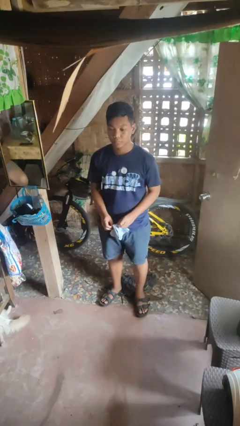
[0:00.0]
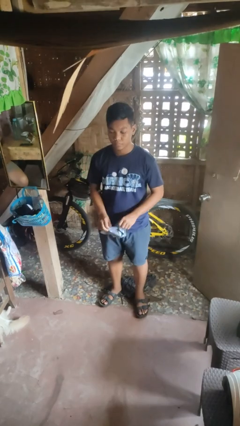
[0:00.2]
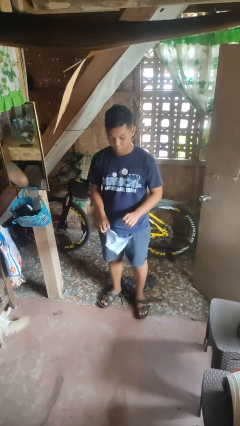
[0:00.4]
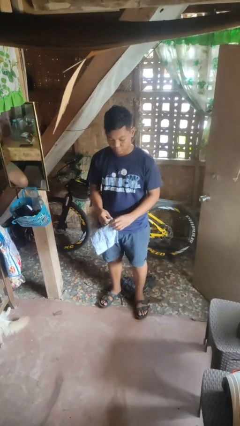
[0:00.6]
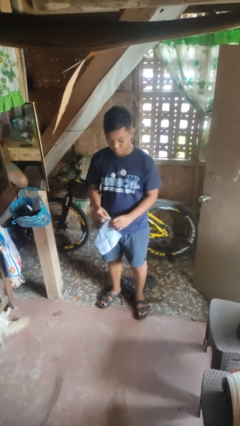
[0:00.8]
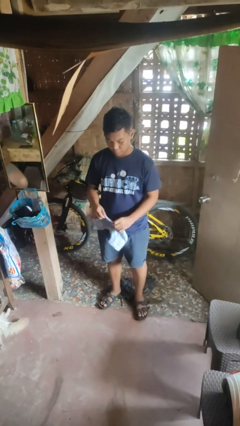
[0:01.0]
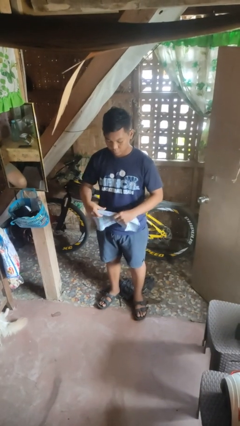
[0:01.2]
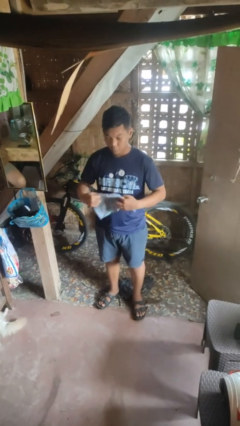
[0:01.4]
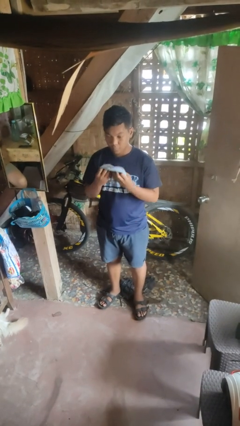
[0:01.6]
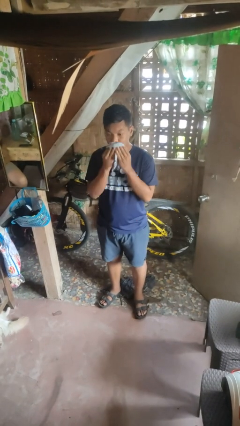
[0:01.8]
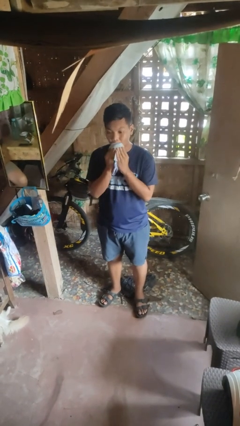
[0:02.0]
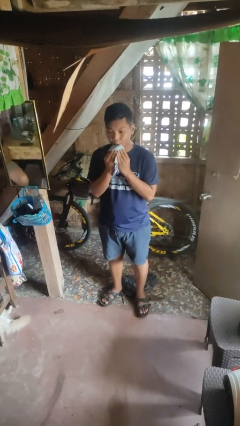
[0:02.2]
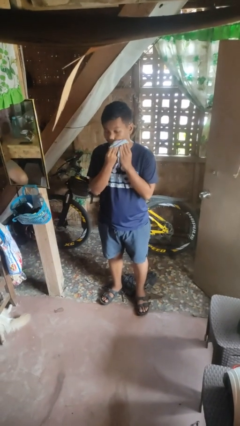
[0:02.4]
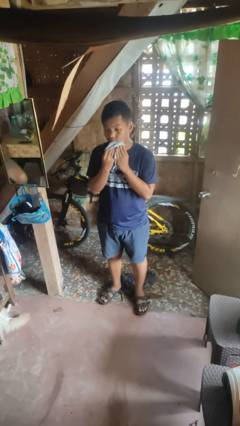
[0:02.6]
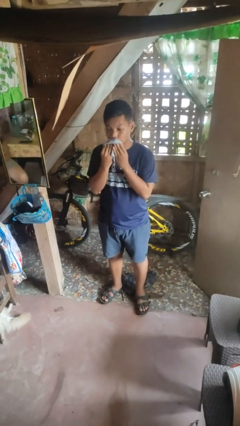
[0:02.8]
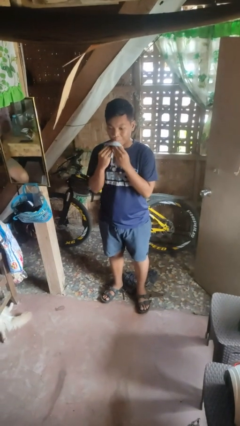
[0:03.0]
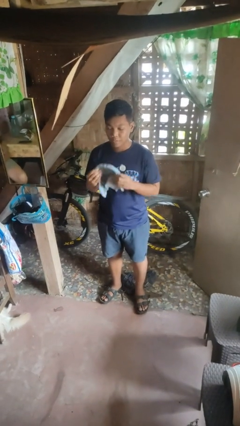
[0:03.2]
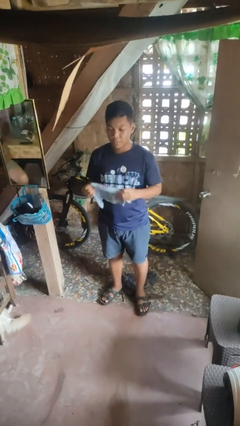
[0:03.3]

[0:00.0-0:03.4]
person wipes mouth with napkin

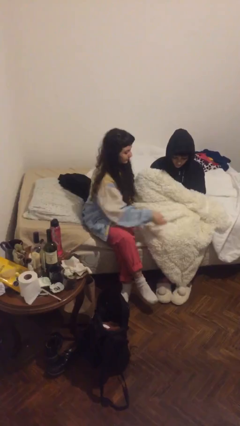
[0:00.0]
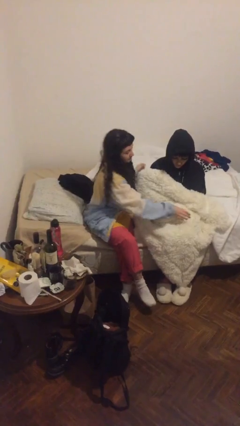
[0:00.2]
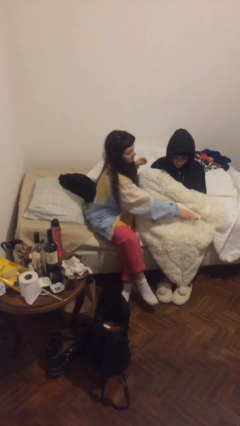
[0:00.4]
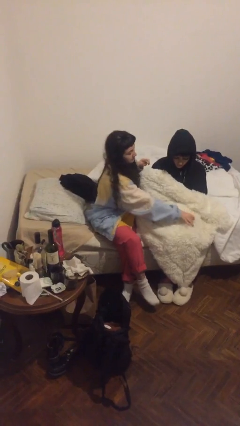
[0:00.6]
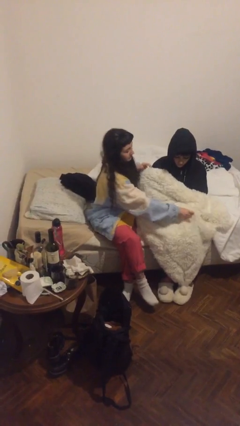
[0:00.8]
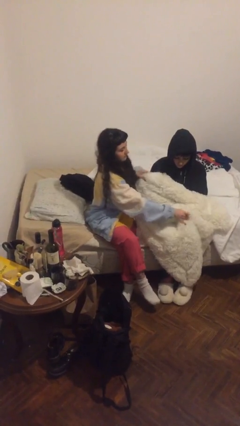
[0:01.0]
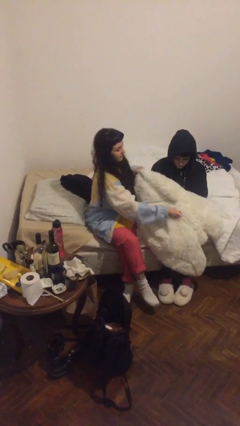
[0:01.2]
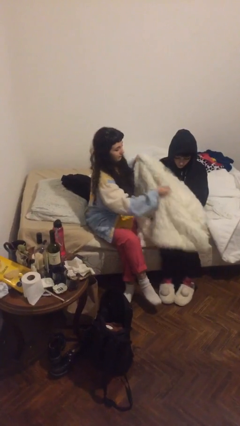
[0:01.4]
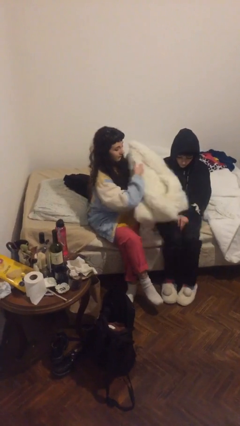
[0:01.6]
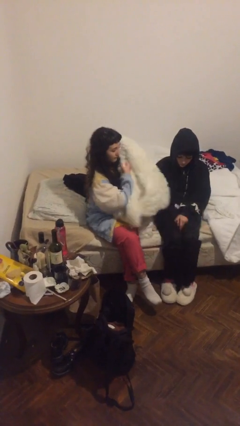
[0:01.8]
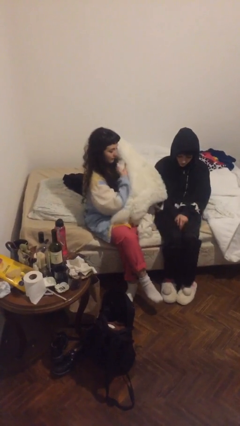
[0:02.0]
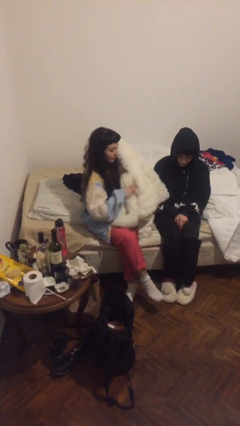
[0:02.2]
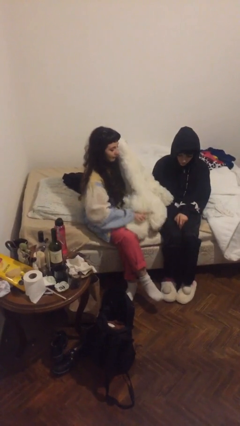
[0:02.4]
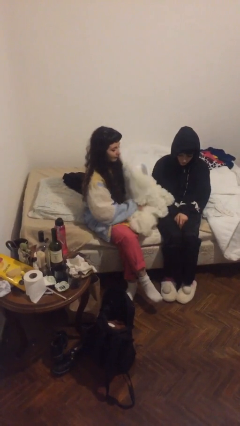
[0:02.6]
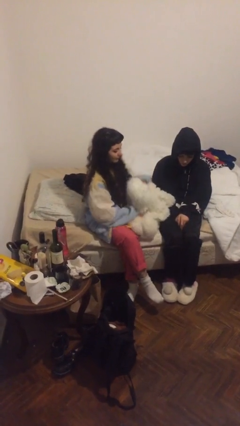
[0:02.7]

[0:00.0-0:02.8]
person uncovers friend with blanket

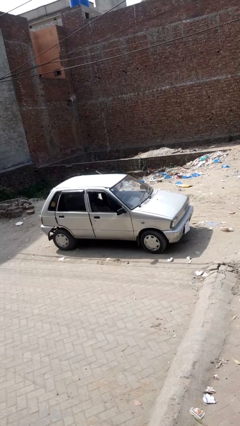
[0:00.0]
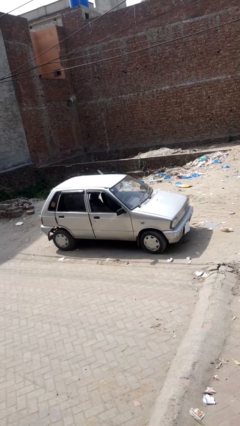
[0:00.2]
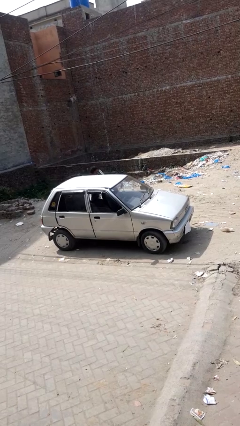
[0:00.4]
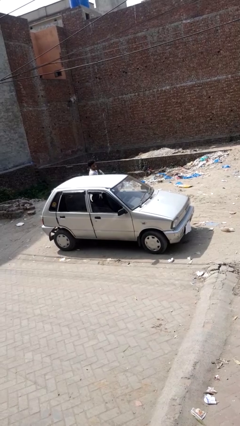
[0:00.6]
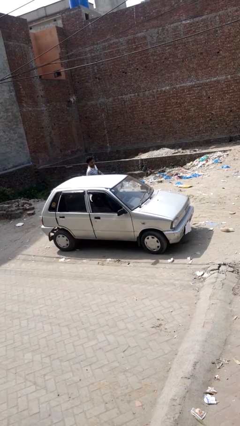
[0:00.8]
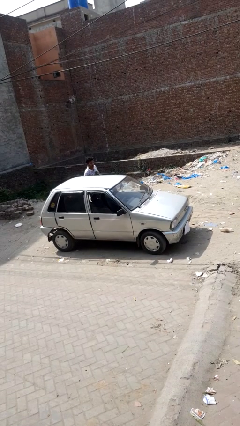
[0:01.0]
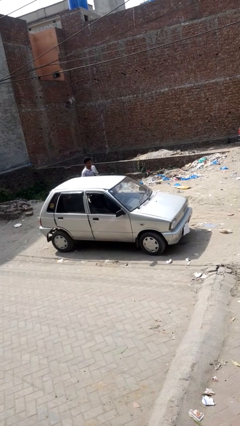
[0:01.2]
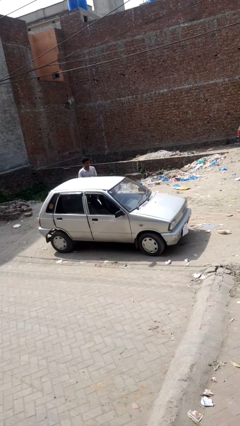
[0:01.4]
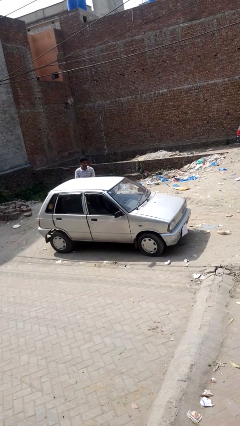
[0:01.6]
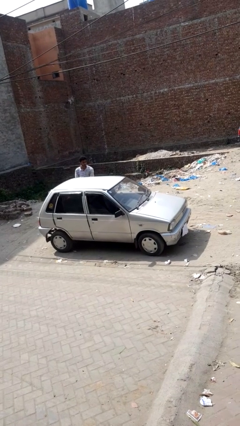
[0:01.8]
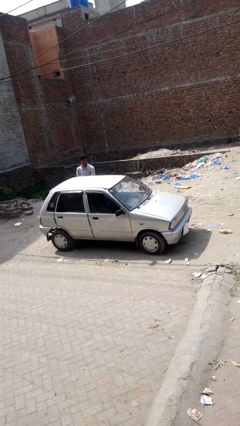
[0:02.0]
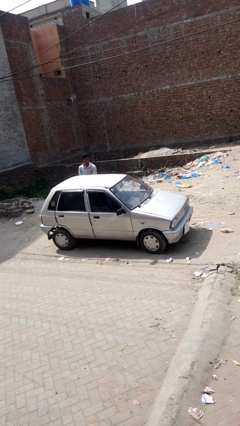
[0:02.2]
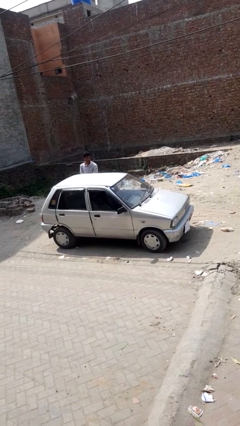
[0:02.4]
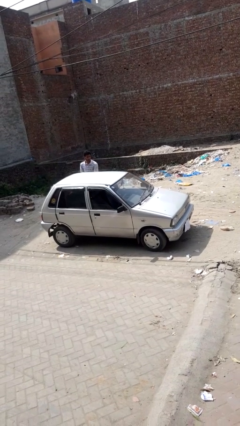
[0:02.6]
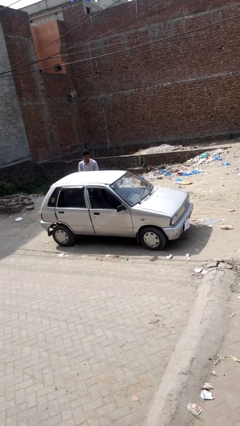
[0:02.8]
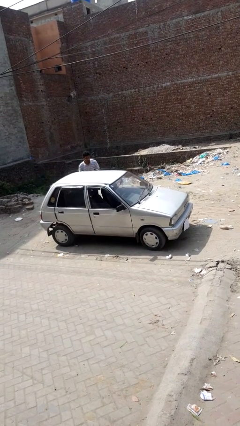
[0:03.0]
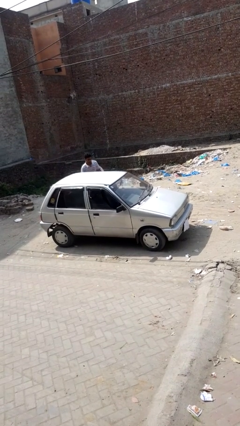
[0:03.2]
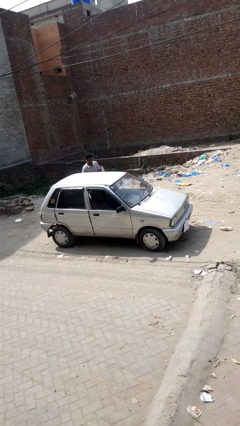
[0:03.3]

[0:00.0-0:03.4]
car drops off person

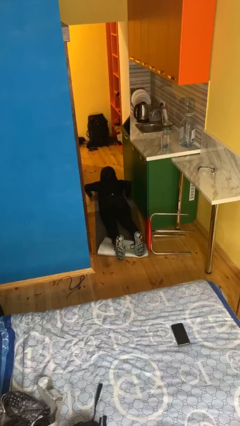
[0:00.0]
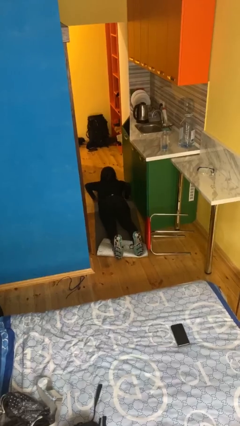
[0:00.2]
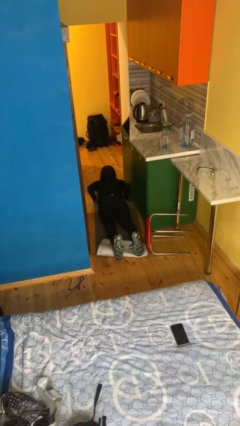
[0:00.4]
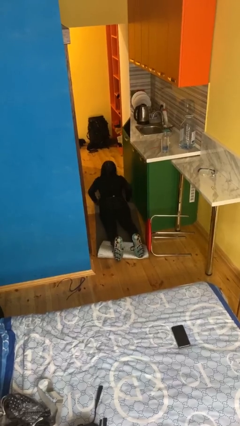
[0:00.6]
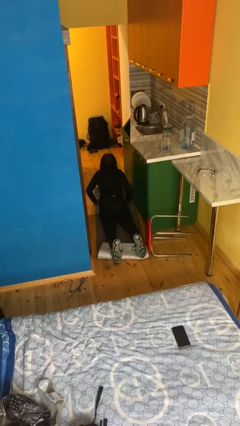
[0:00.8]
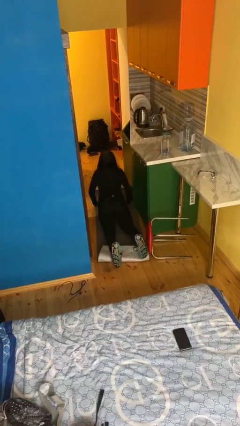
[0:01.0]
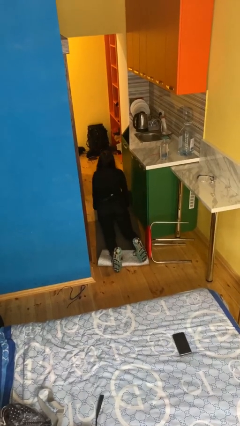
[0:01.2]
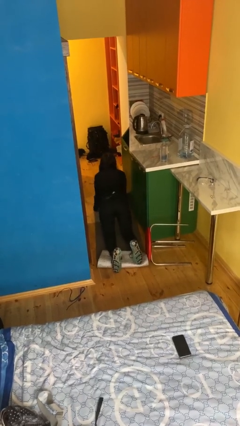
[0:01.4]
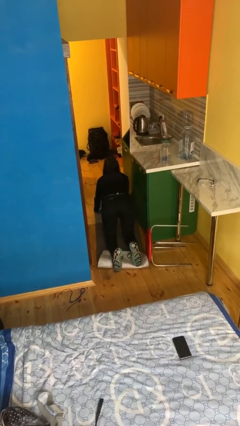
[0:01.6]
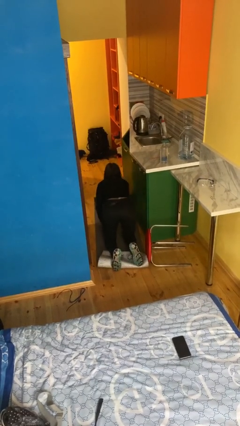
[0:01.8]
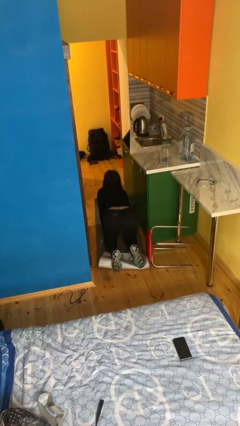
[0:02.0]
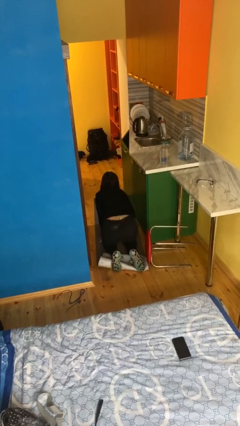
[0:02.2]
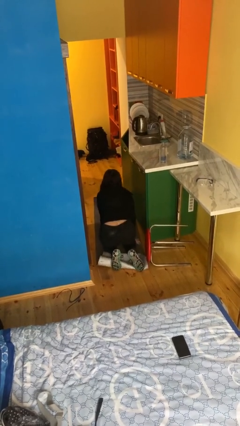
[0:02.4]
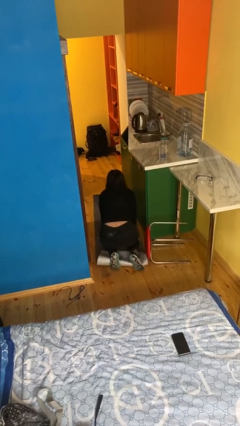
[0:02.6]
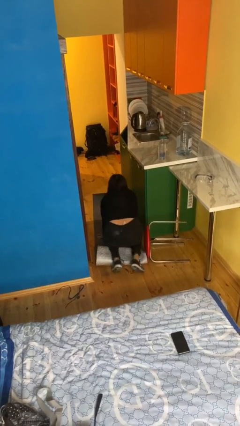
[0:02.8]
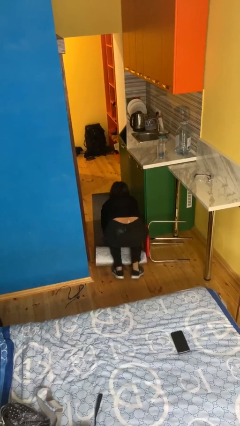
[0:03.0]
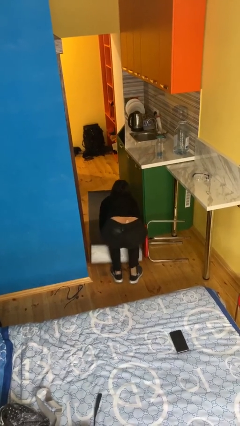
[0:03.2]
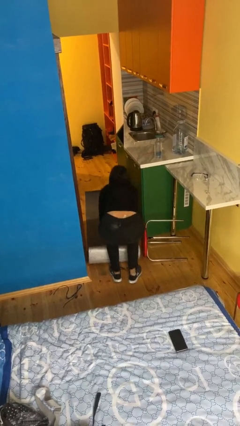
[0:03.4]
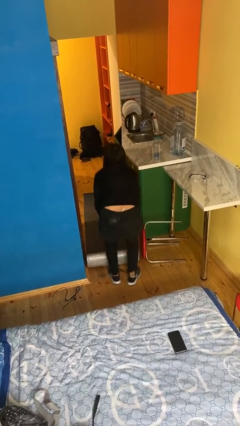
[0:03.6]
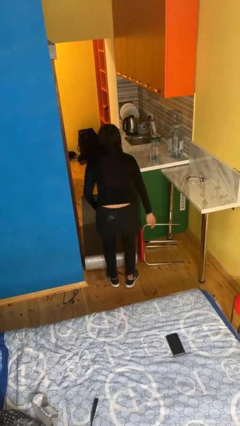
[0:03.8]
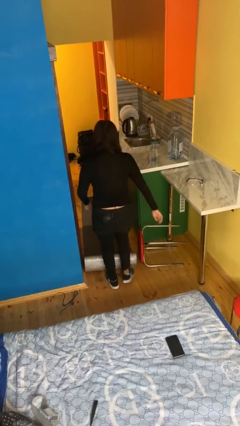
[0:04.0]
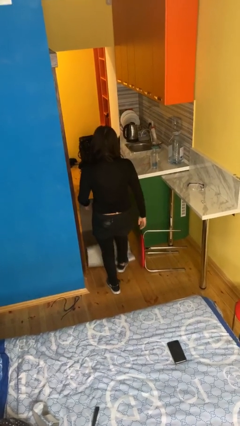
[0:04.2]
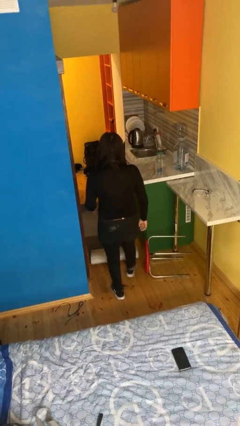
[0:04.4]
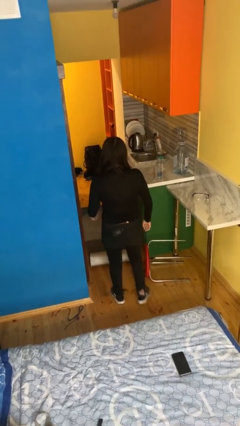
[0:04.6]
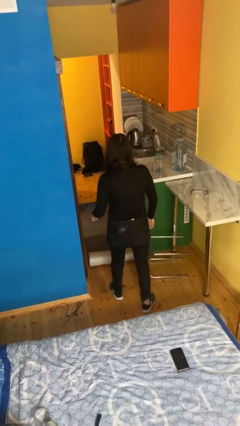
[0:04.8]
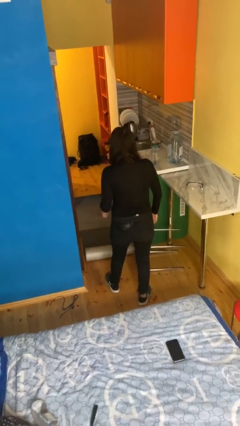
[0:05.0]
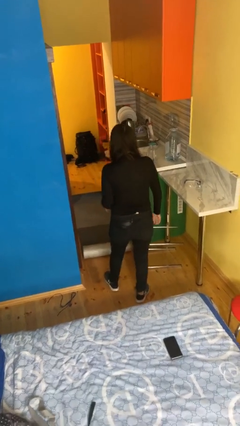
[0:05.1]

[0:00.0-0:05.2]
person stands up from floor

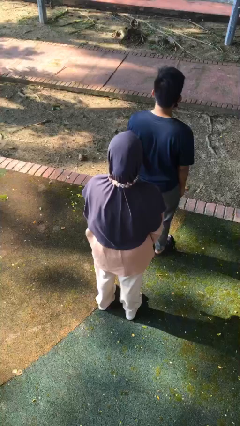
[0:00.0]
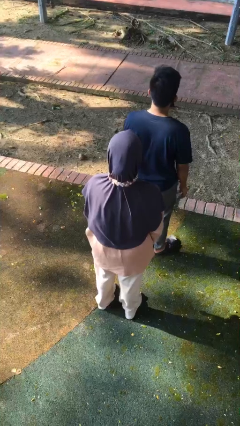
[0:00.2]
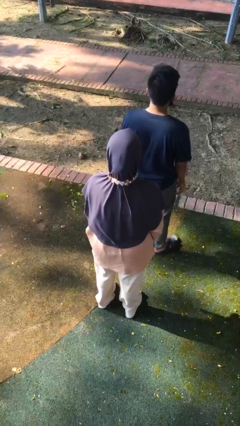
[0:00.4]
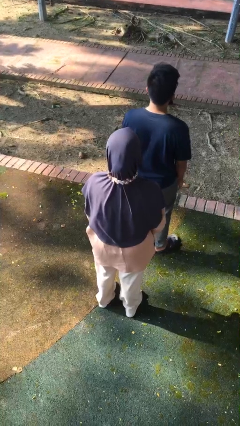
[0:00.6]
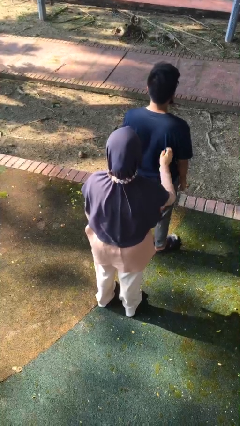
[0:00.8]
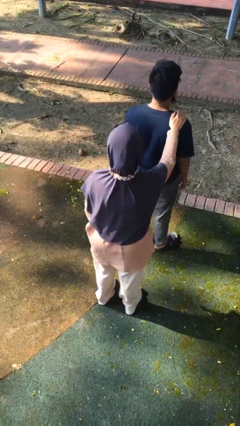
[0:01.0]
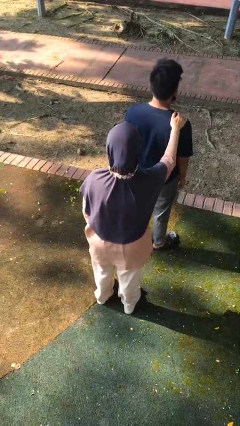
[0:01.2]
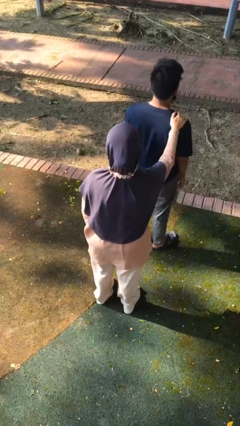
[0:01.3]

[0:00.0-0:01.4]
person grabs person by shoulder

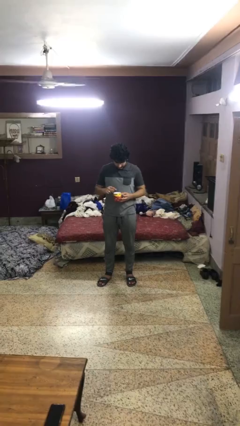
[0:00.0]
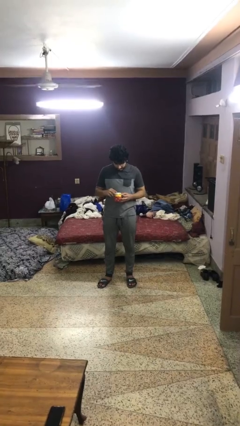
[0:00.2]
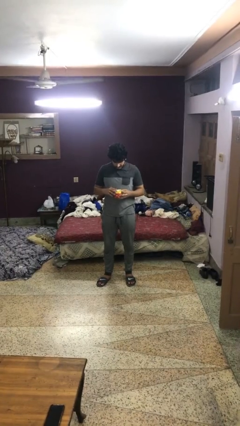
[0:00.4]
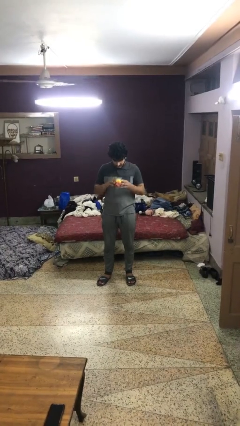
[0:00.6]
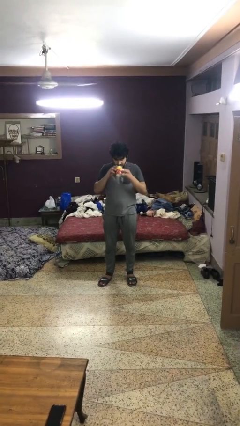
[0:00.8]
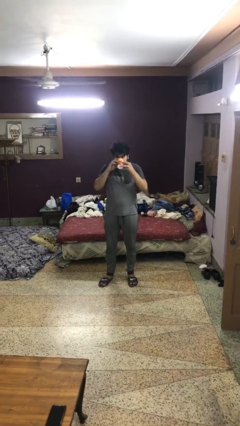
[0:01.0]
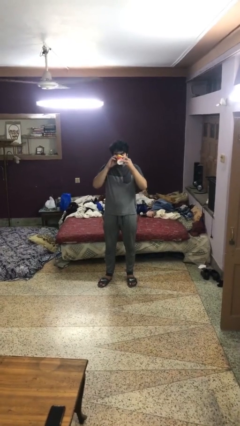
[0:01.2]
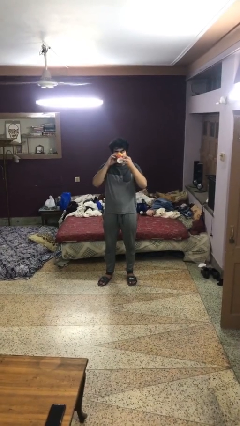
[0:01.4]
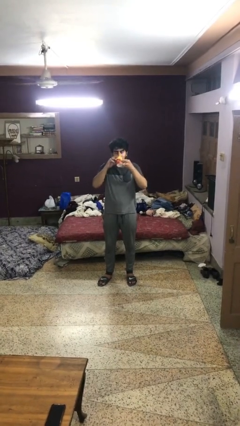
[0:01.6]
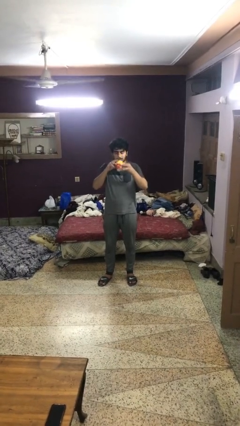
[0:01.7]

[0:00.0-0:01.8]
person drinks from mug
